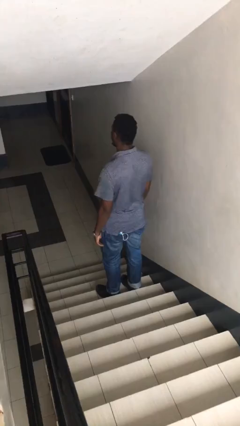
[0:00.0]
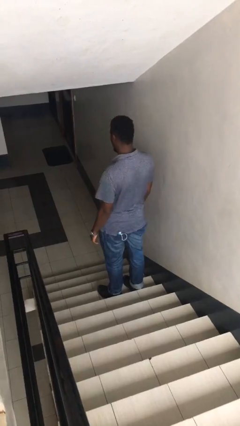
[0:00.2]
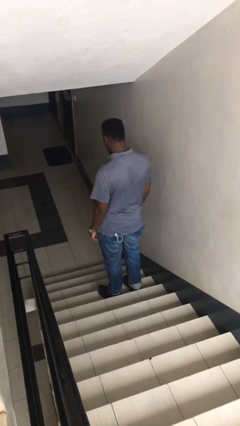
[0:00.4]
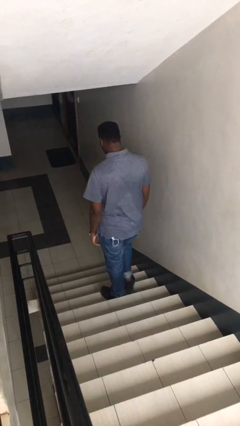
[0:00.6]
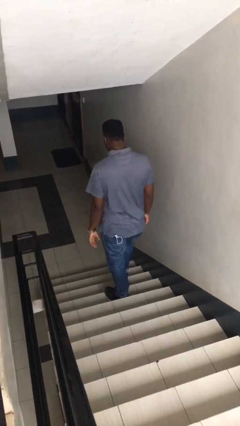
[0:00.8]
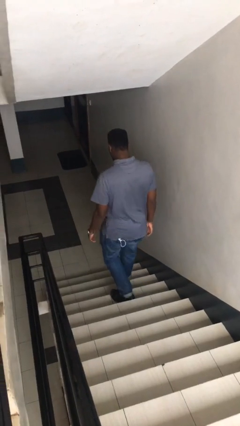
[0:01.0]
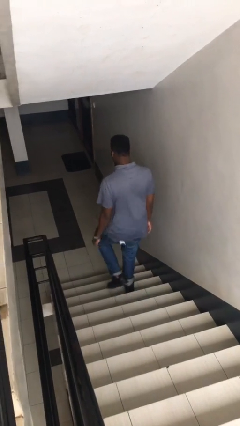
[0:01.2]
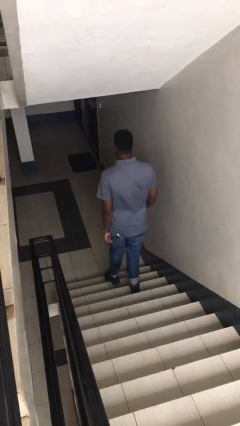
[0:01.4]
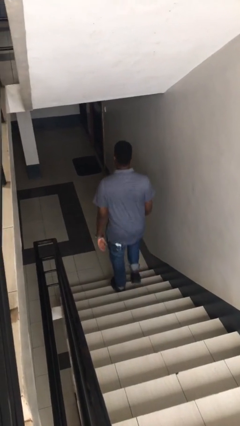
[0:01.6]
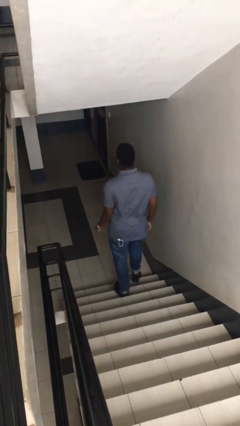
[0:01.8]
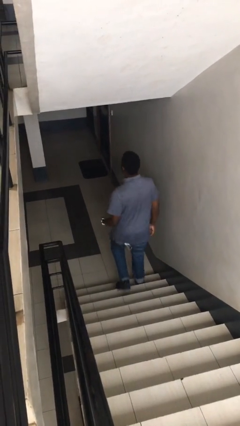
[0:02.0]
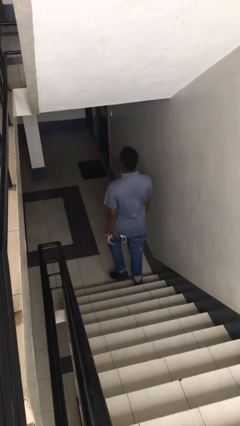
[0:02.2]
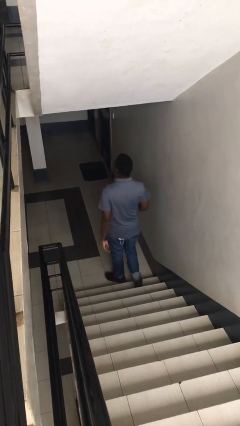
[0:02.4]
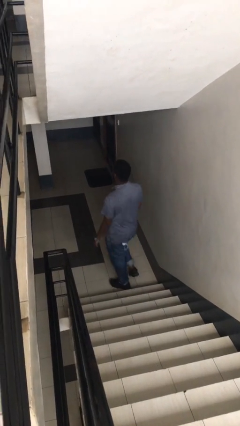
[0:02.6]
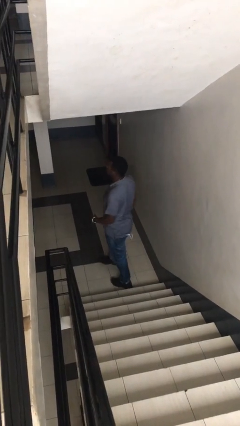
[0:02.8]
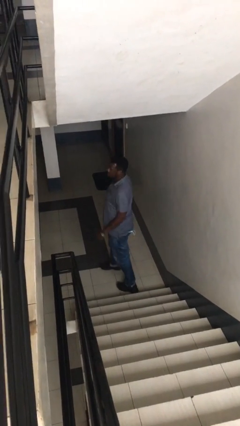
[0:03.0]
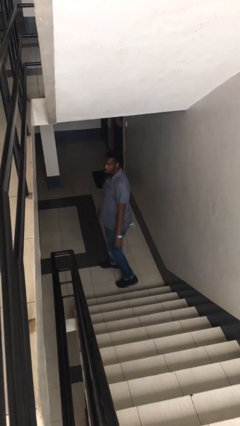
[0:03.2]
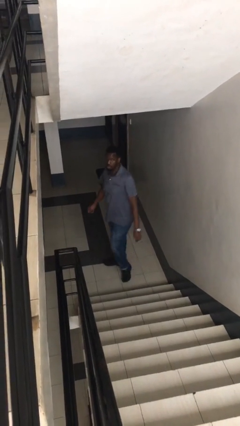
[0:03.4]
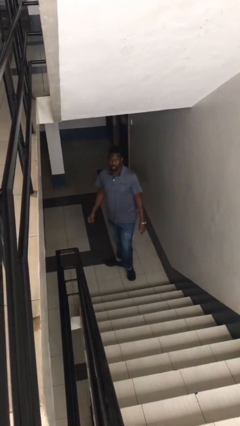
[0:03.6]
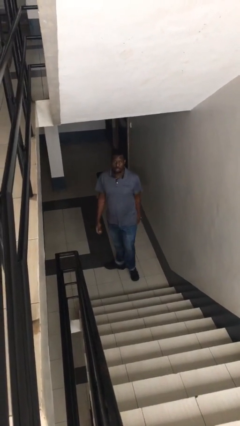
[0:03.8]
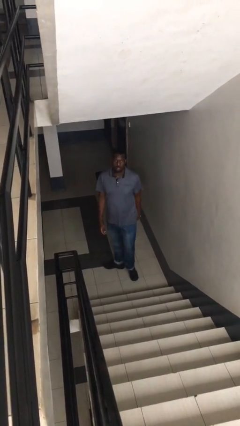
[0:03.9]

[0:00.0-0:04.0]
person climbs down stairs

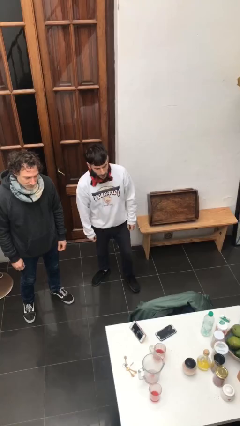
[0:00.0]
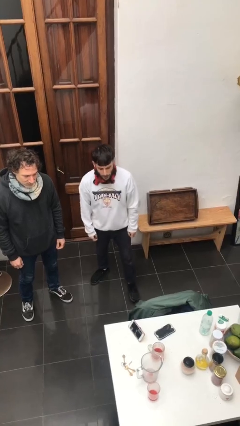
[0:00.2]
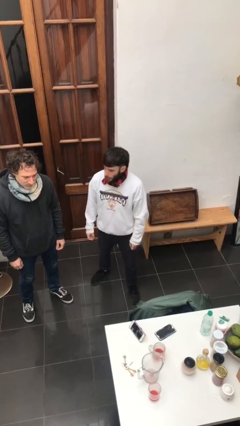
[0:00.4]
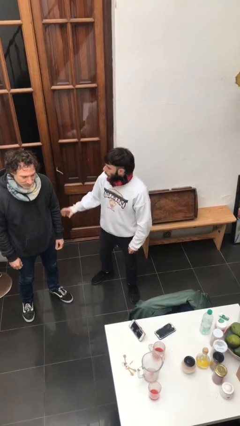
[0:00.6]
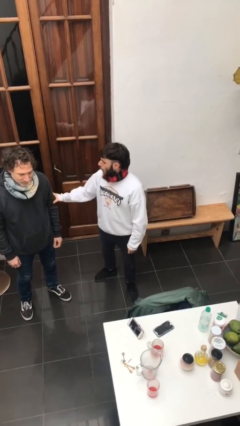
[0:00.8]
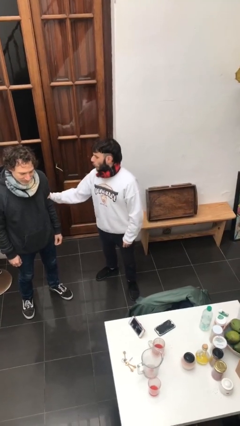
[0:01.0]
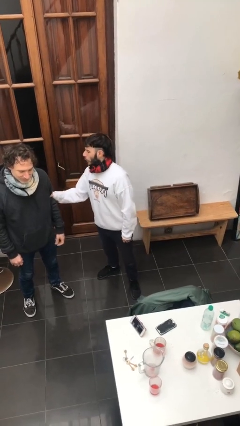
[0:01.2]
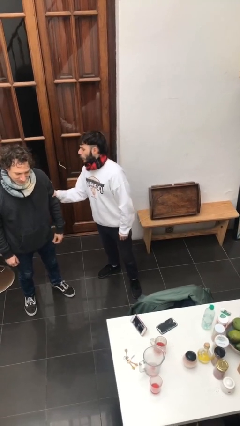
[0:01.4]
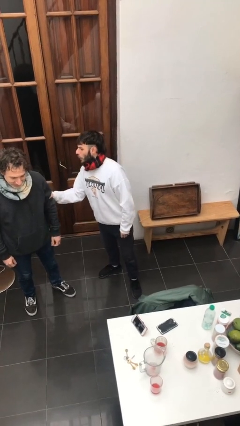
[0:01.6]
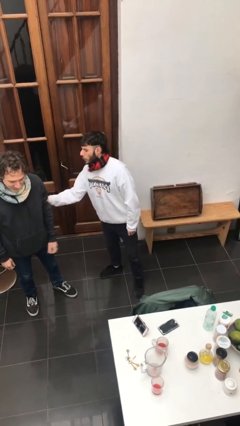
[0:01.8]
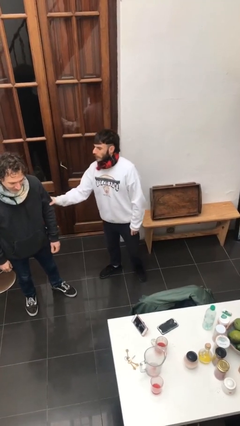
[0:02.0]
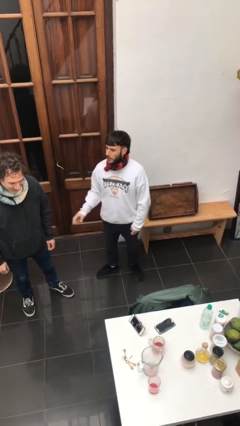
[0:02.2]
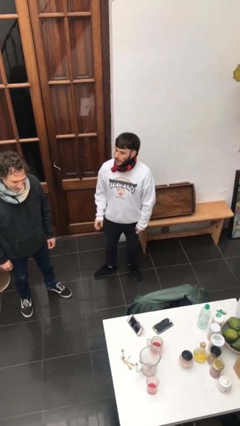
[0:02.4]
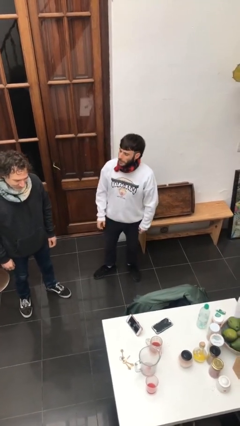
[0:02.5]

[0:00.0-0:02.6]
person grabs person by bicep

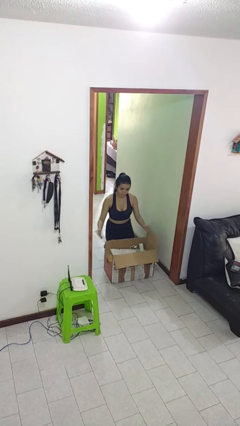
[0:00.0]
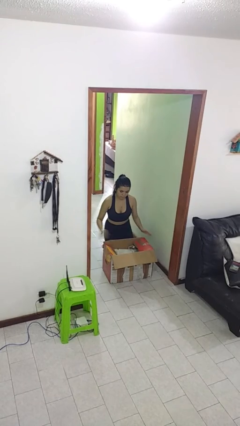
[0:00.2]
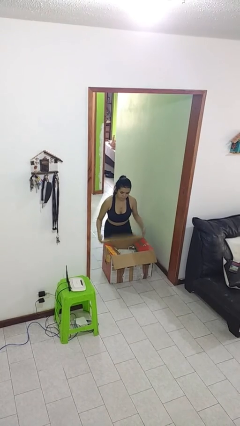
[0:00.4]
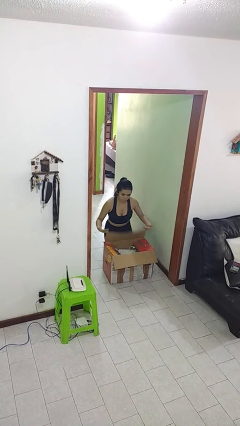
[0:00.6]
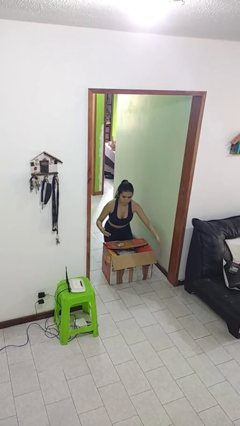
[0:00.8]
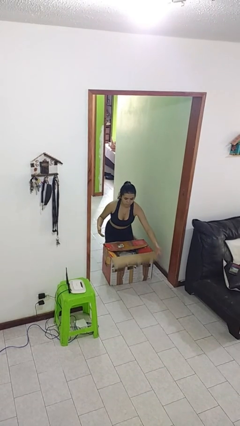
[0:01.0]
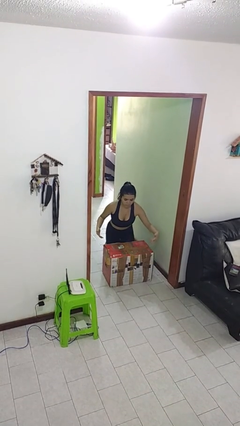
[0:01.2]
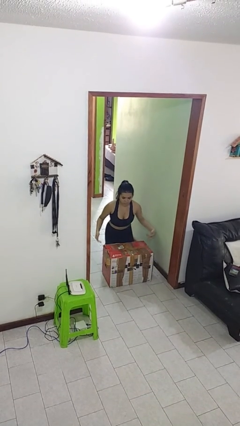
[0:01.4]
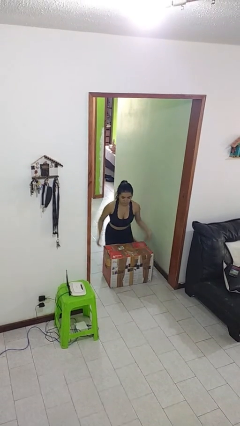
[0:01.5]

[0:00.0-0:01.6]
person closes box

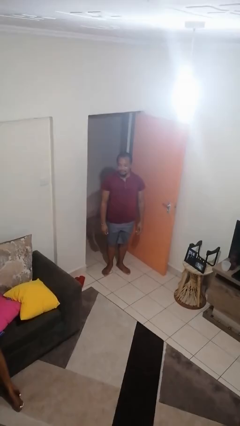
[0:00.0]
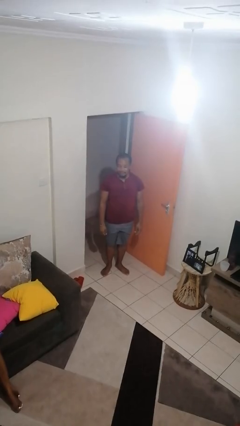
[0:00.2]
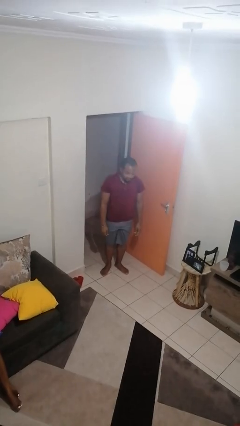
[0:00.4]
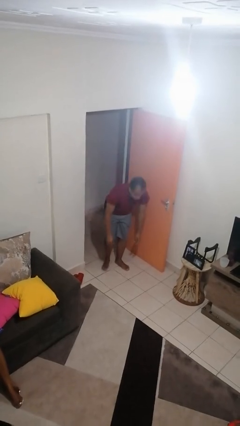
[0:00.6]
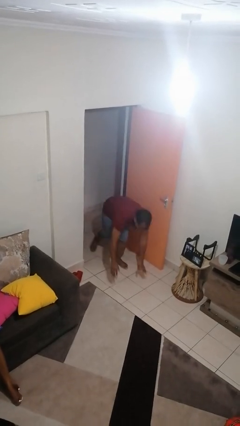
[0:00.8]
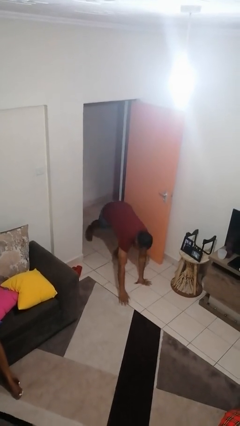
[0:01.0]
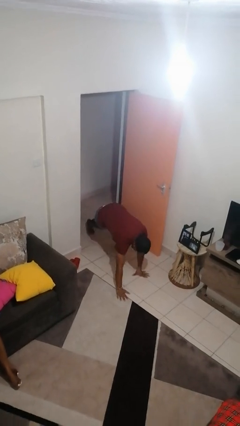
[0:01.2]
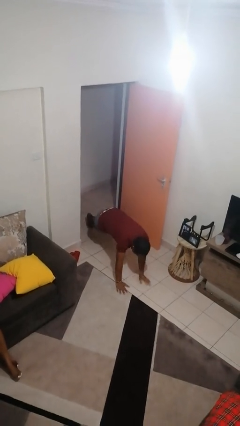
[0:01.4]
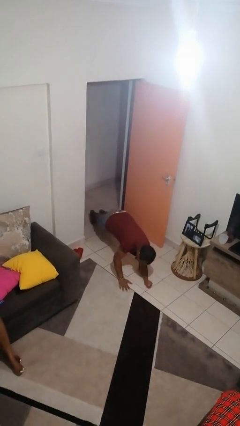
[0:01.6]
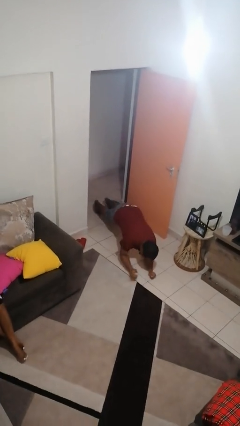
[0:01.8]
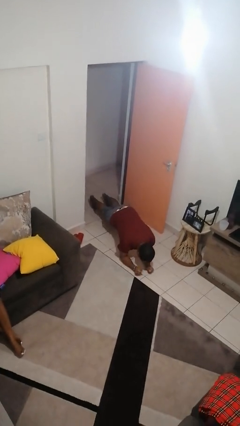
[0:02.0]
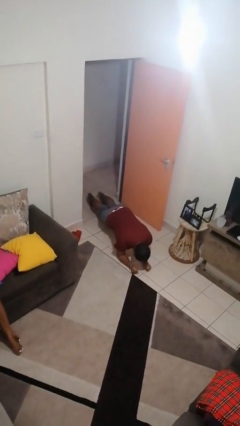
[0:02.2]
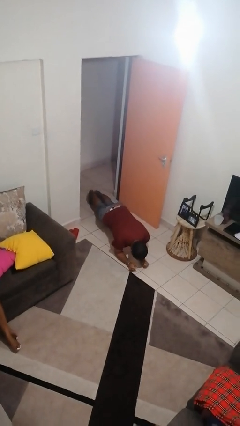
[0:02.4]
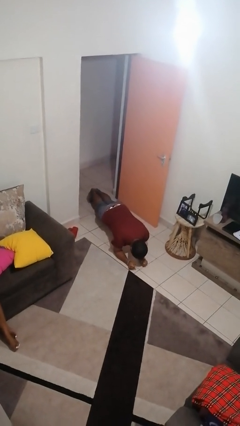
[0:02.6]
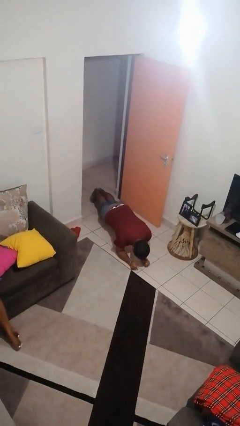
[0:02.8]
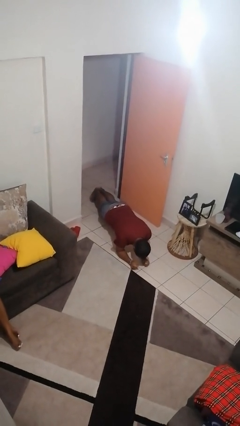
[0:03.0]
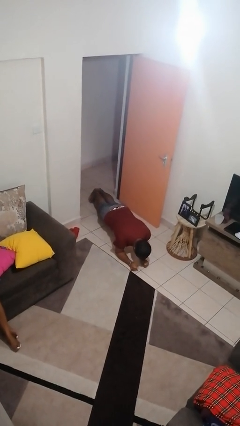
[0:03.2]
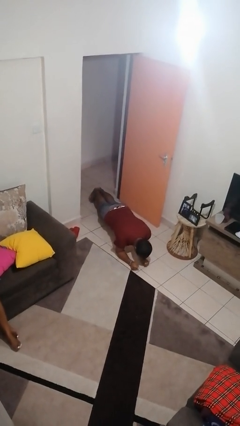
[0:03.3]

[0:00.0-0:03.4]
person exercises with plank

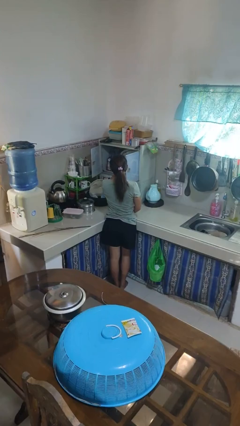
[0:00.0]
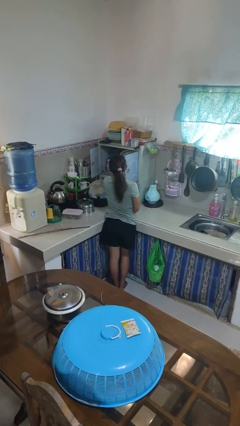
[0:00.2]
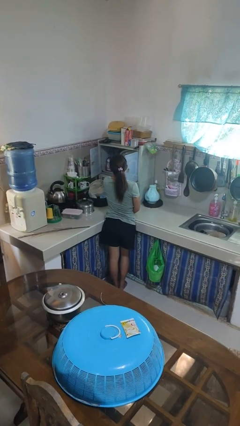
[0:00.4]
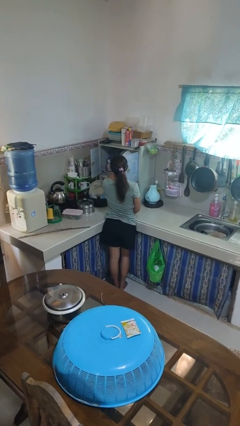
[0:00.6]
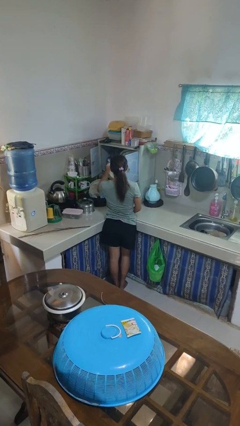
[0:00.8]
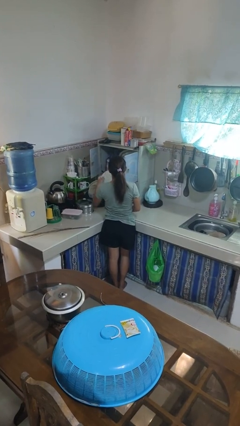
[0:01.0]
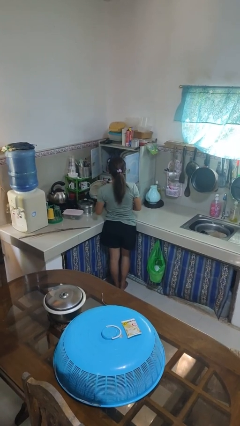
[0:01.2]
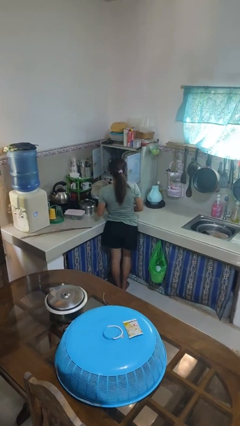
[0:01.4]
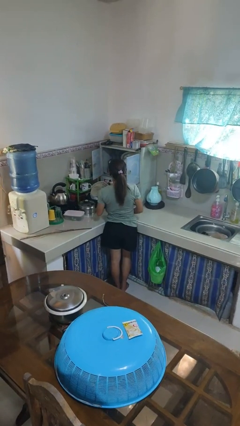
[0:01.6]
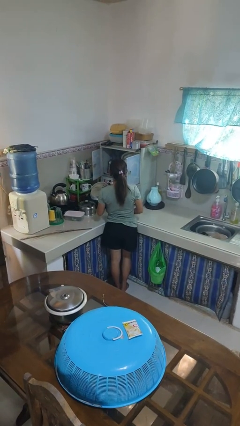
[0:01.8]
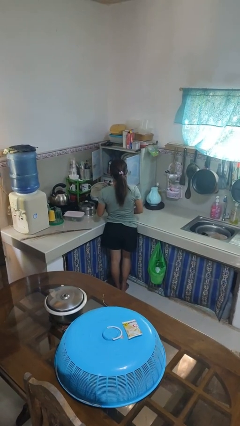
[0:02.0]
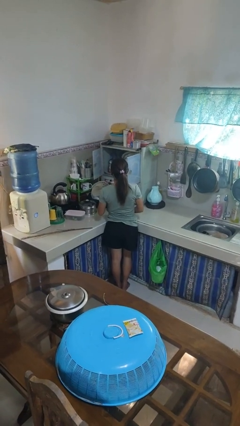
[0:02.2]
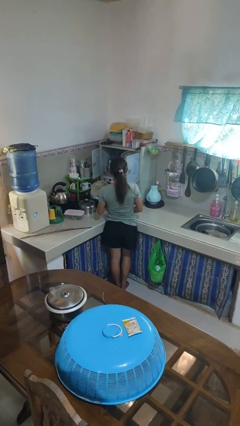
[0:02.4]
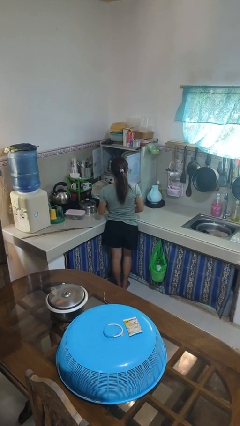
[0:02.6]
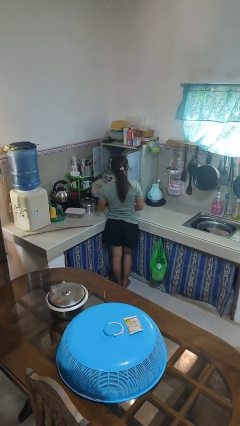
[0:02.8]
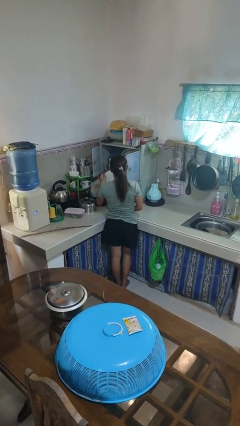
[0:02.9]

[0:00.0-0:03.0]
person takes object from kitchen drawer

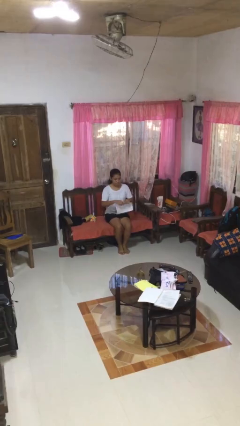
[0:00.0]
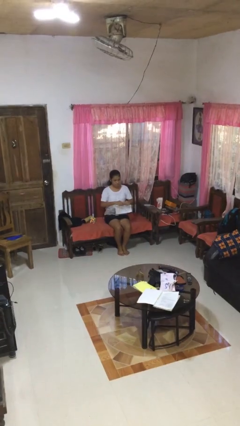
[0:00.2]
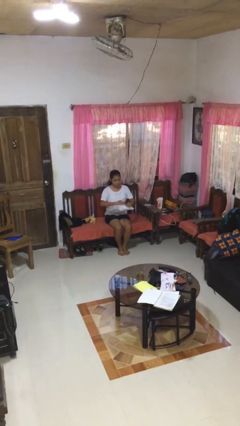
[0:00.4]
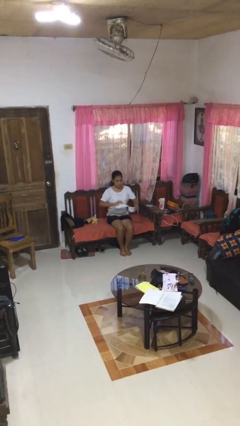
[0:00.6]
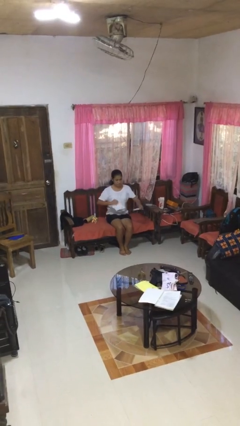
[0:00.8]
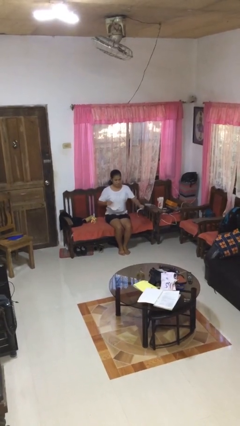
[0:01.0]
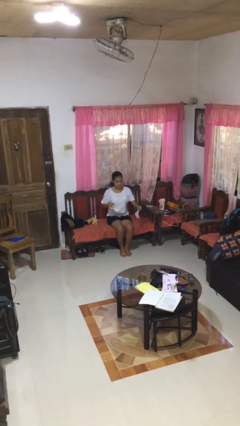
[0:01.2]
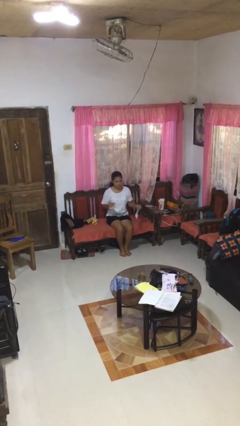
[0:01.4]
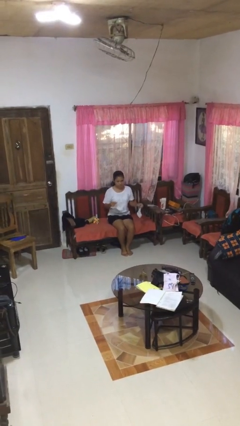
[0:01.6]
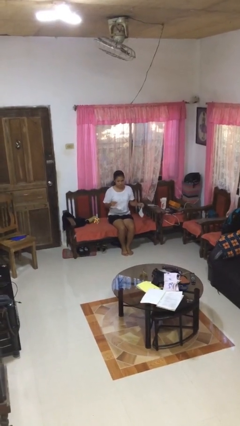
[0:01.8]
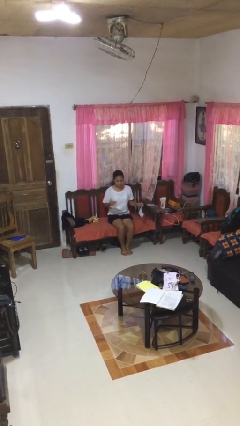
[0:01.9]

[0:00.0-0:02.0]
person tears paper

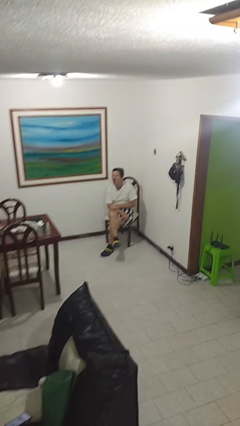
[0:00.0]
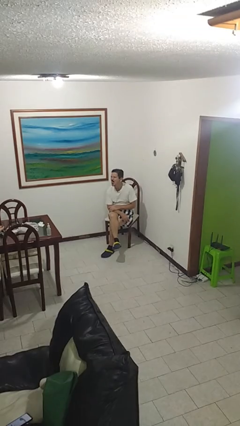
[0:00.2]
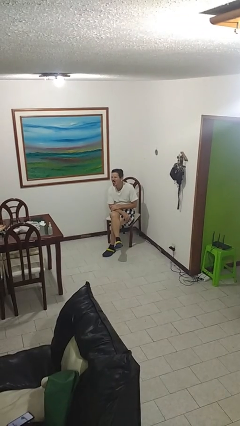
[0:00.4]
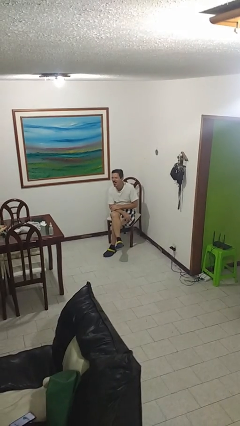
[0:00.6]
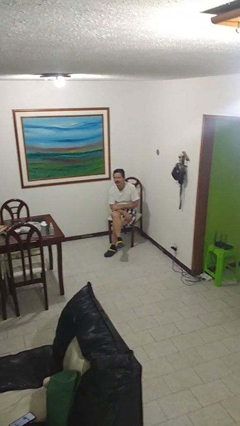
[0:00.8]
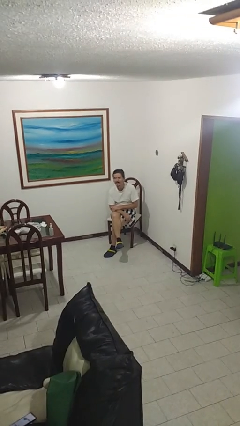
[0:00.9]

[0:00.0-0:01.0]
person sticks out tongue
